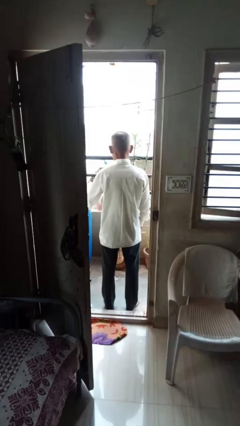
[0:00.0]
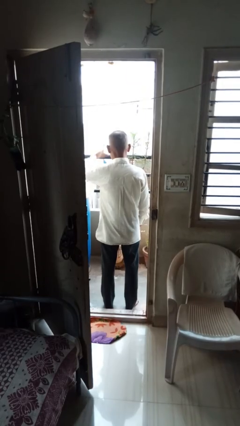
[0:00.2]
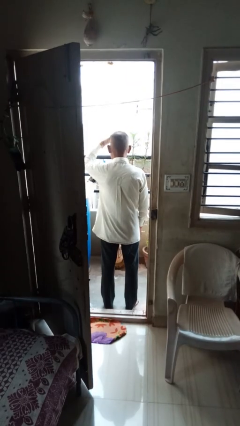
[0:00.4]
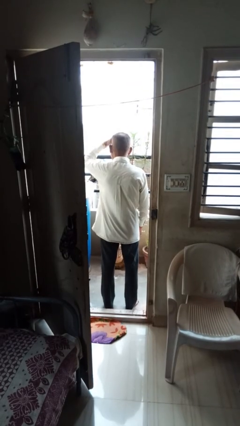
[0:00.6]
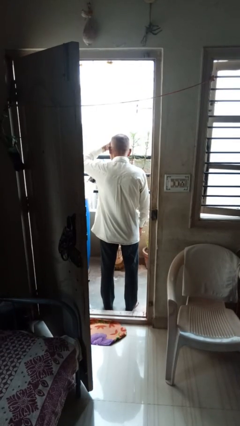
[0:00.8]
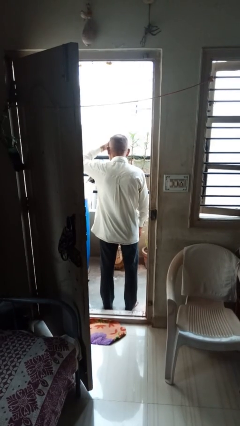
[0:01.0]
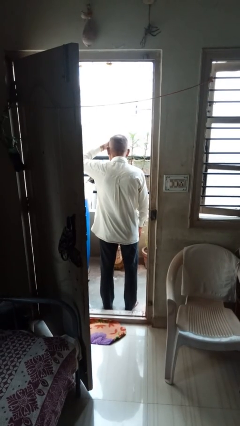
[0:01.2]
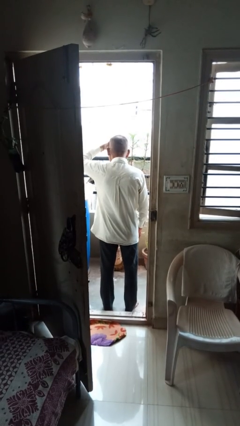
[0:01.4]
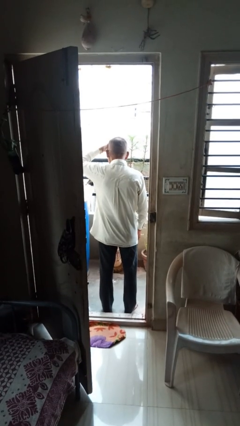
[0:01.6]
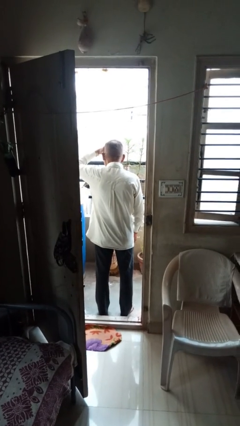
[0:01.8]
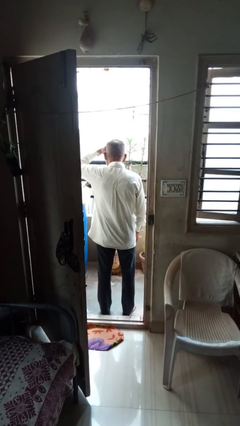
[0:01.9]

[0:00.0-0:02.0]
person shades eyes

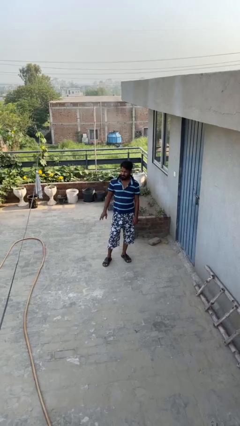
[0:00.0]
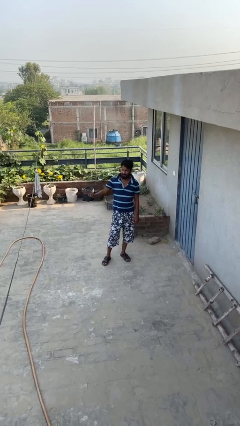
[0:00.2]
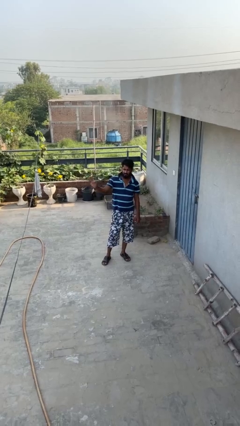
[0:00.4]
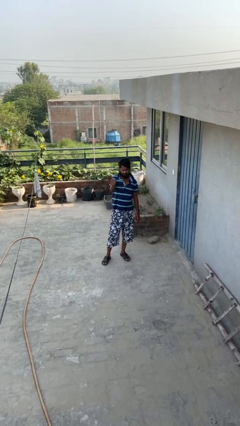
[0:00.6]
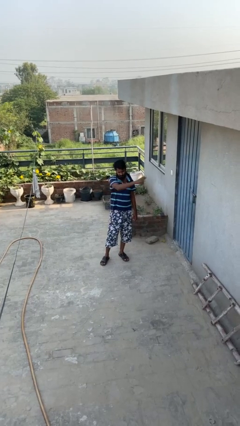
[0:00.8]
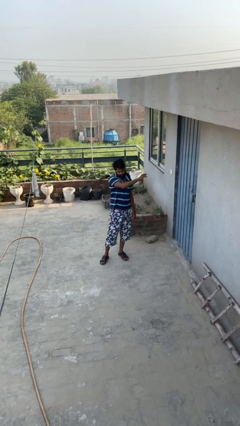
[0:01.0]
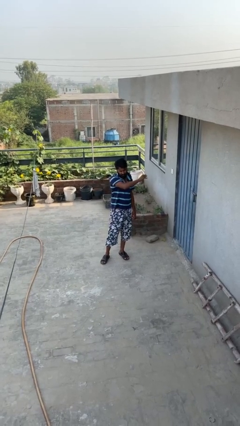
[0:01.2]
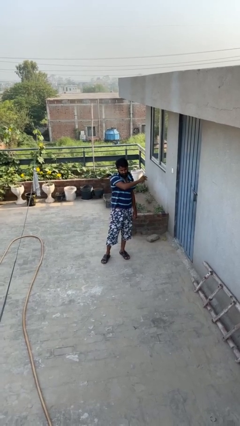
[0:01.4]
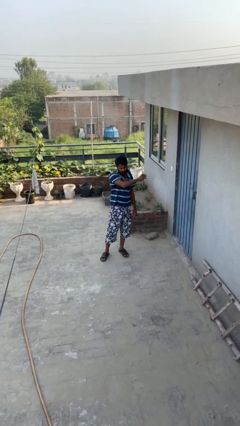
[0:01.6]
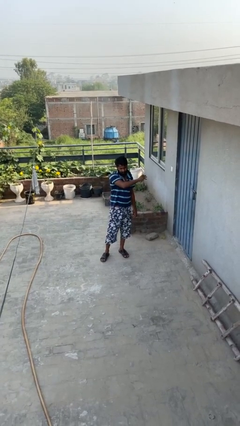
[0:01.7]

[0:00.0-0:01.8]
person gestures swipe left

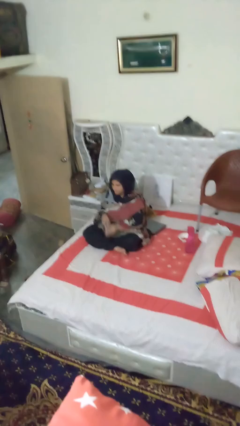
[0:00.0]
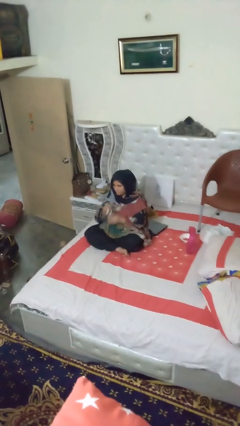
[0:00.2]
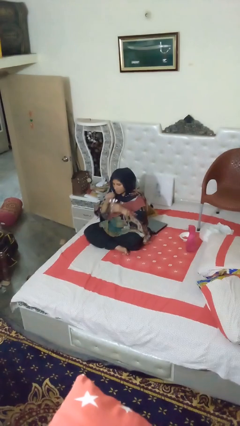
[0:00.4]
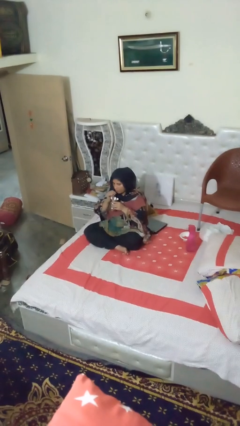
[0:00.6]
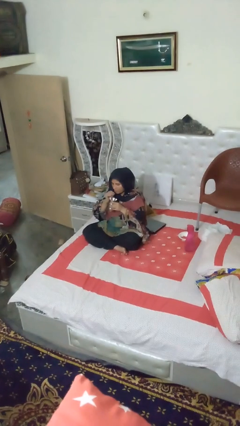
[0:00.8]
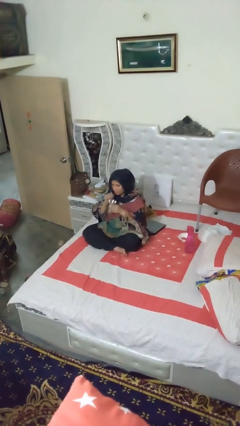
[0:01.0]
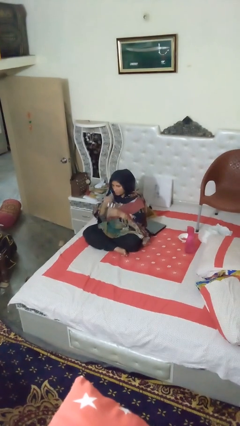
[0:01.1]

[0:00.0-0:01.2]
person drinks from straw

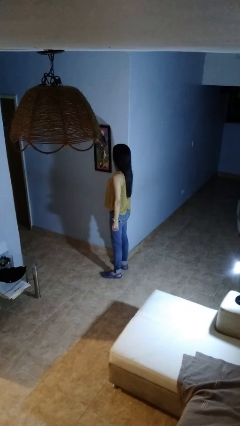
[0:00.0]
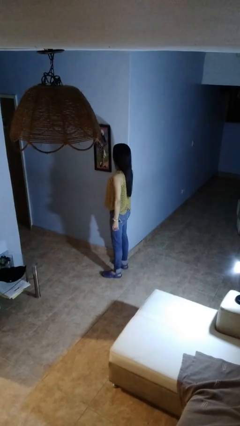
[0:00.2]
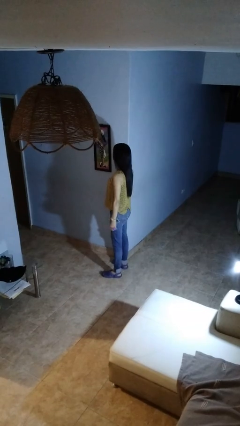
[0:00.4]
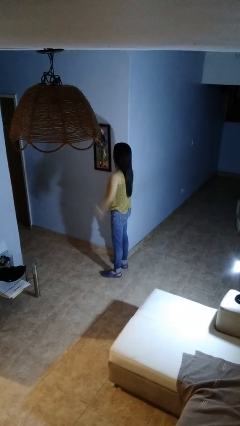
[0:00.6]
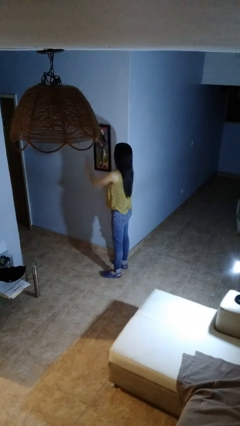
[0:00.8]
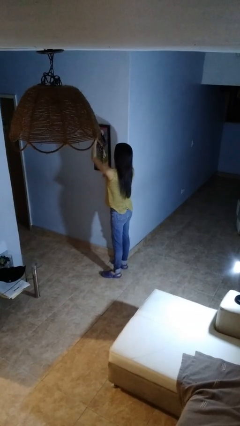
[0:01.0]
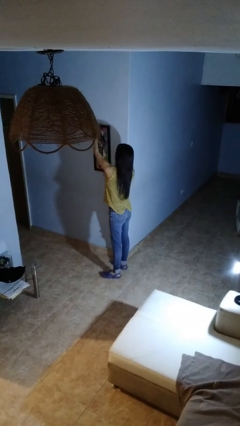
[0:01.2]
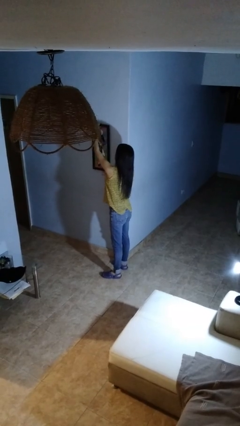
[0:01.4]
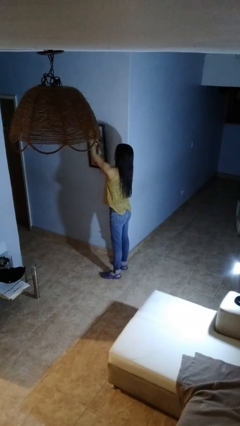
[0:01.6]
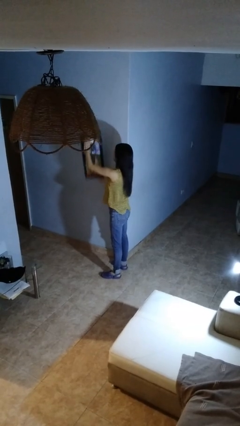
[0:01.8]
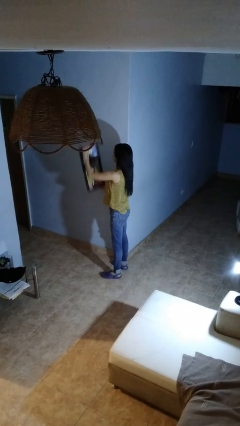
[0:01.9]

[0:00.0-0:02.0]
person takes down picture frame

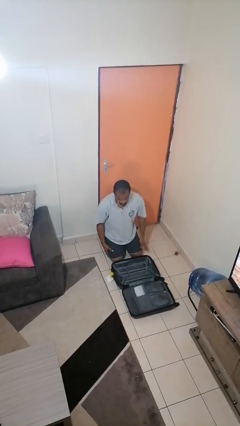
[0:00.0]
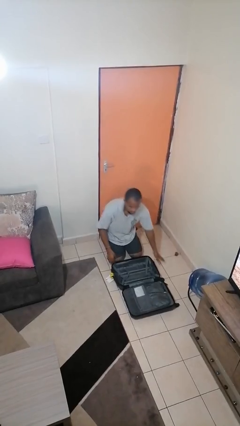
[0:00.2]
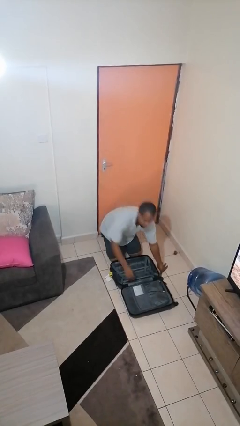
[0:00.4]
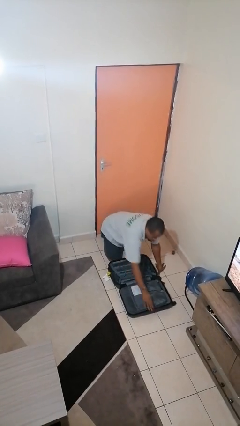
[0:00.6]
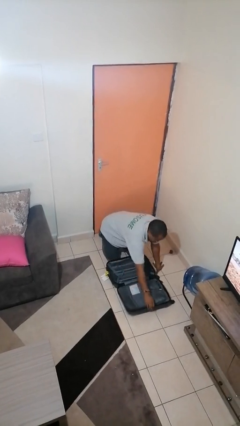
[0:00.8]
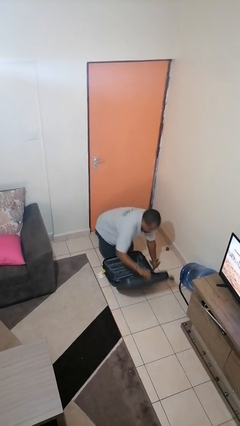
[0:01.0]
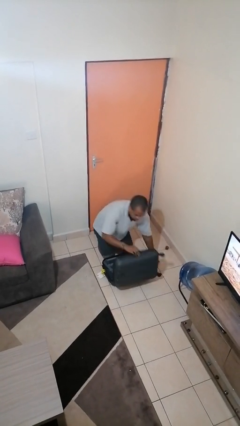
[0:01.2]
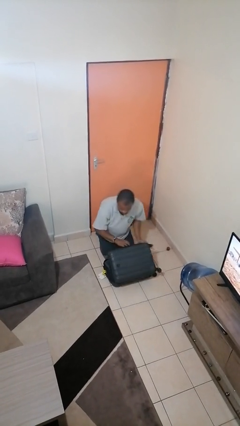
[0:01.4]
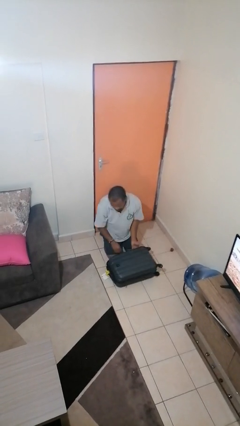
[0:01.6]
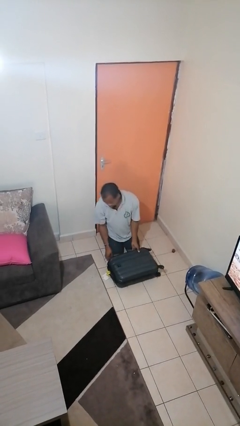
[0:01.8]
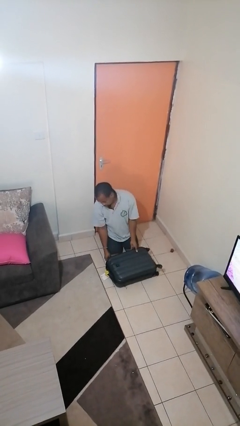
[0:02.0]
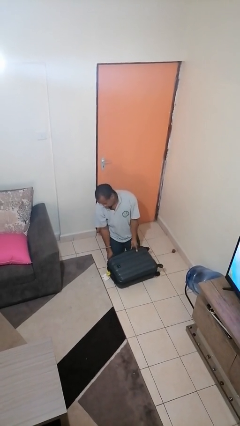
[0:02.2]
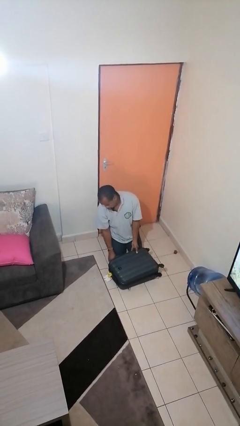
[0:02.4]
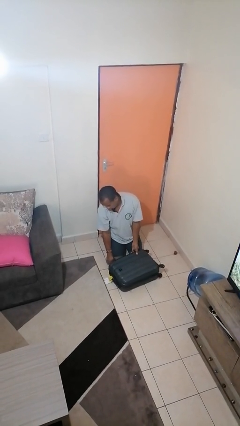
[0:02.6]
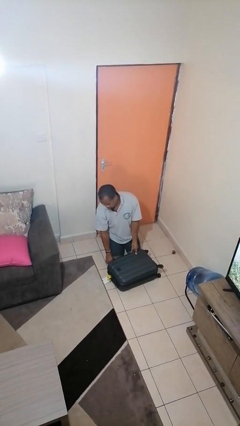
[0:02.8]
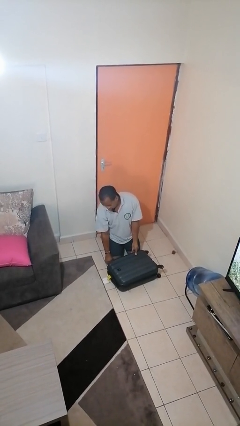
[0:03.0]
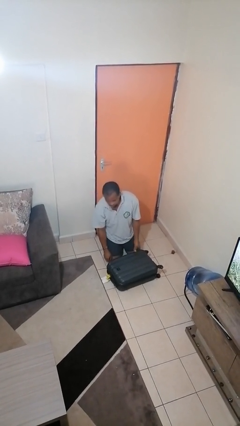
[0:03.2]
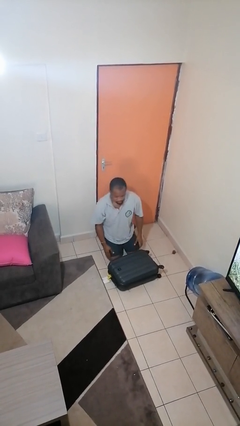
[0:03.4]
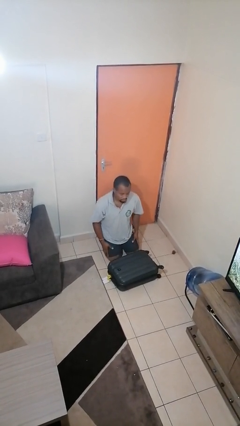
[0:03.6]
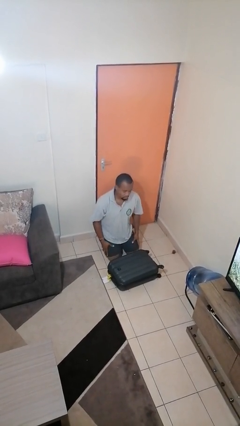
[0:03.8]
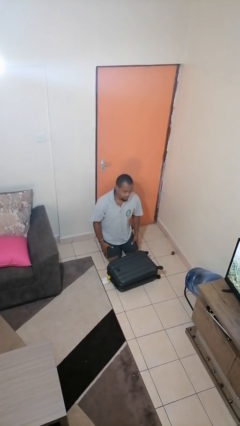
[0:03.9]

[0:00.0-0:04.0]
person closes suitcase

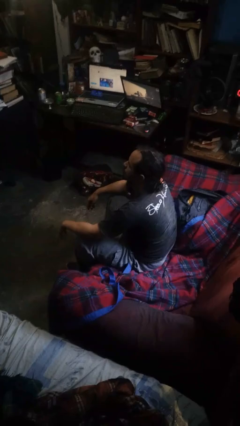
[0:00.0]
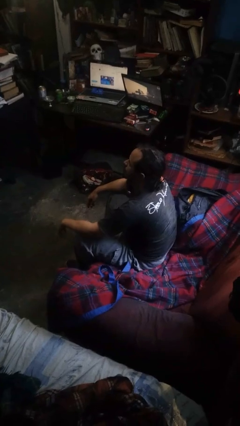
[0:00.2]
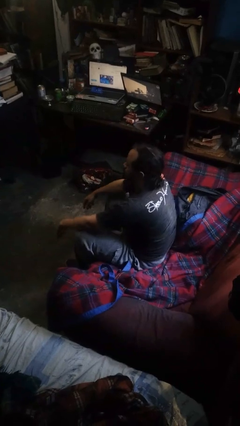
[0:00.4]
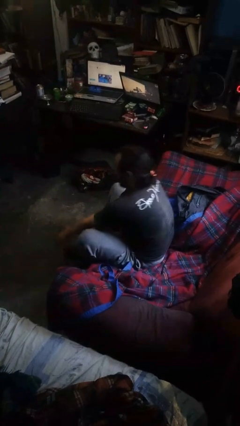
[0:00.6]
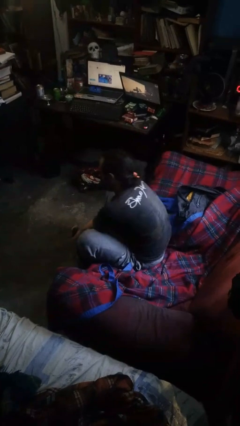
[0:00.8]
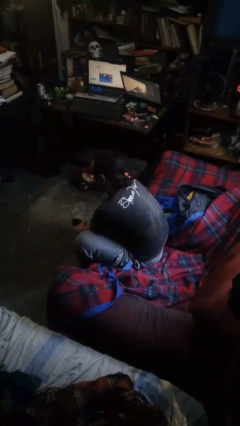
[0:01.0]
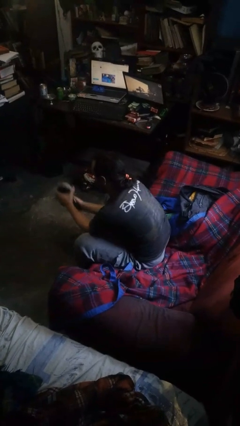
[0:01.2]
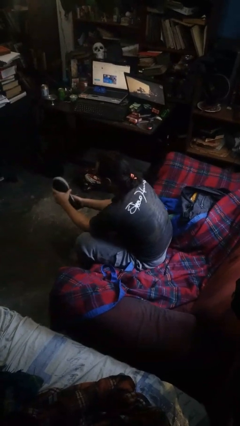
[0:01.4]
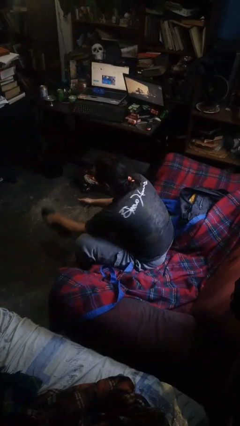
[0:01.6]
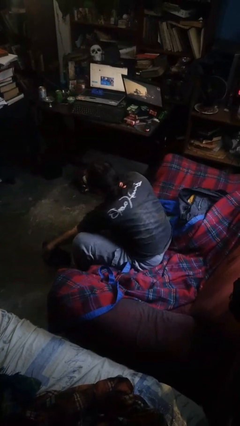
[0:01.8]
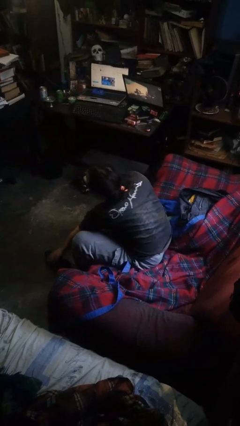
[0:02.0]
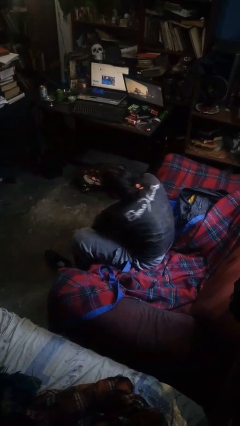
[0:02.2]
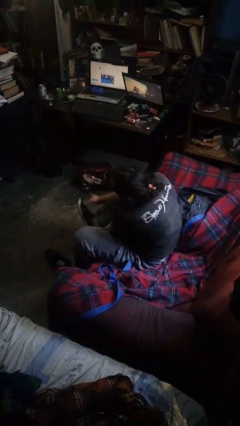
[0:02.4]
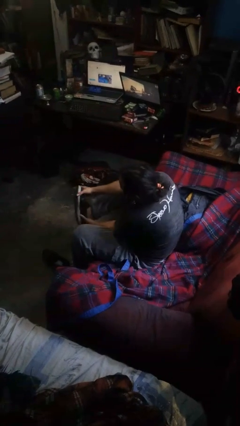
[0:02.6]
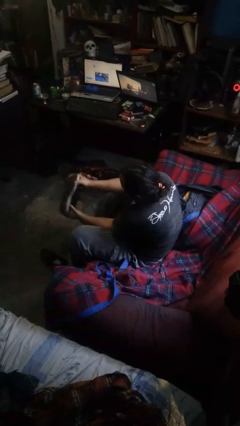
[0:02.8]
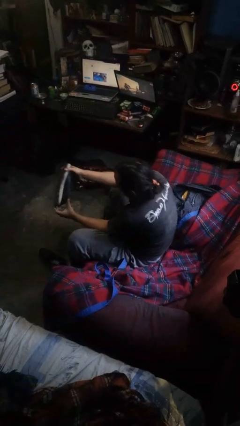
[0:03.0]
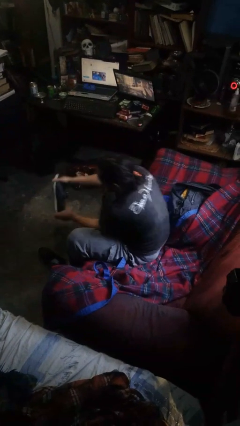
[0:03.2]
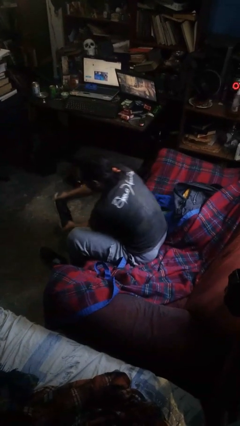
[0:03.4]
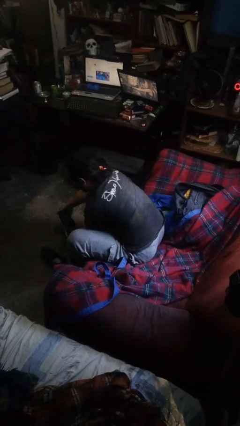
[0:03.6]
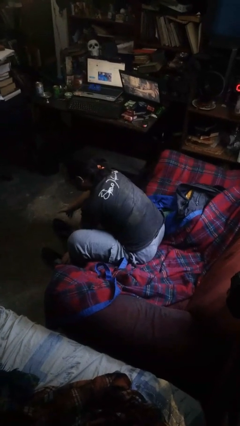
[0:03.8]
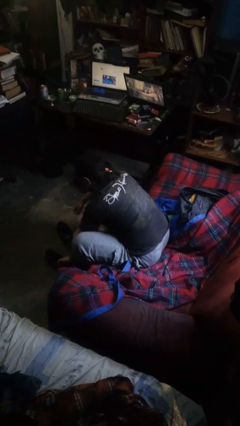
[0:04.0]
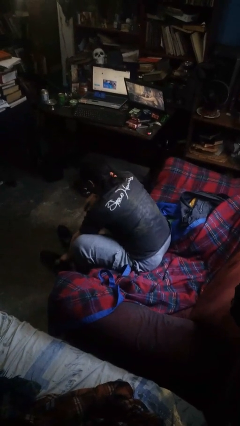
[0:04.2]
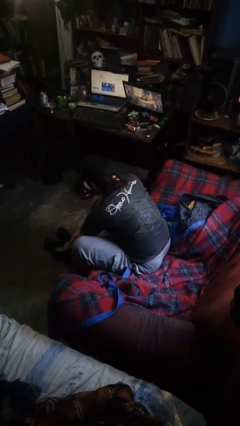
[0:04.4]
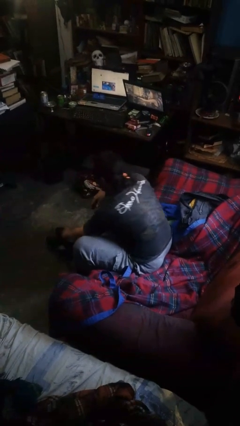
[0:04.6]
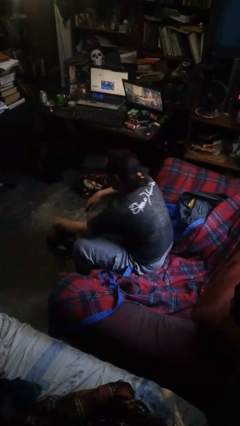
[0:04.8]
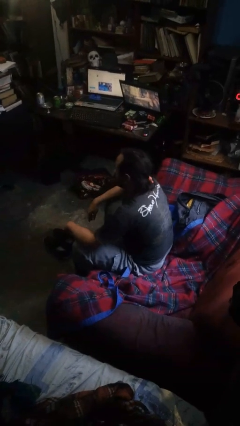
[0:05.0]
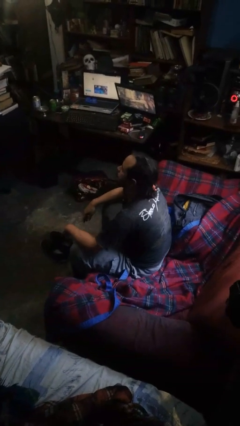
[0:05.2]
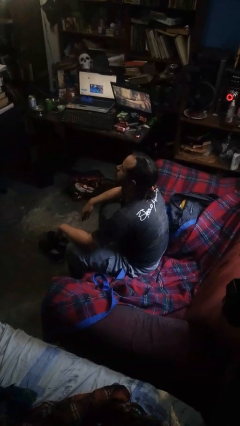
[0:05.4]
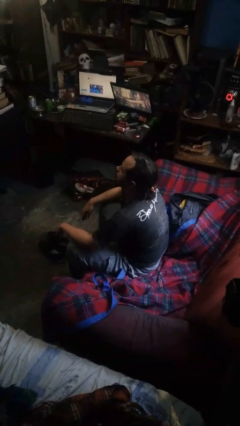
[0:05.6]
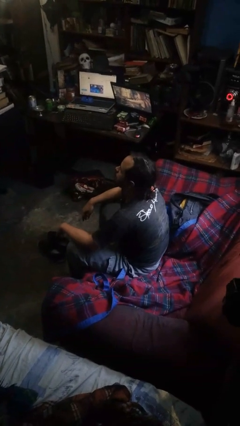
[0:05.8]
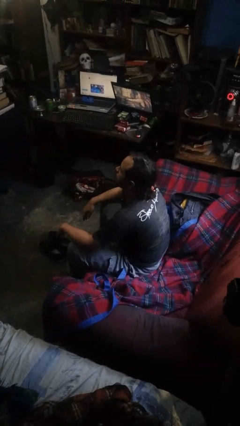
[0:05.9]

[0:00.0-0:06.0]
person takes off shoes

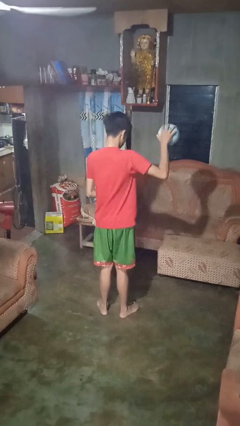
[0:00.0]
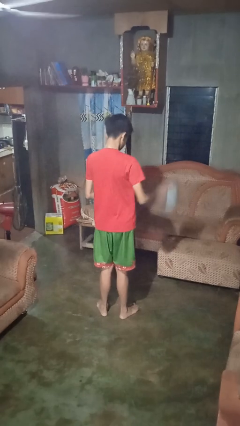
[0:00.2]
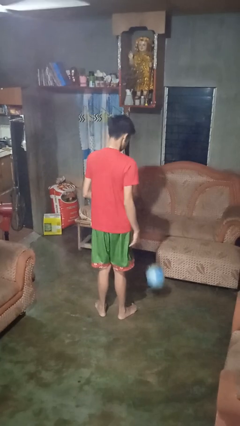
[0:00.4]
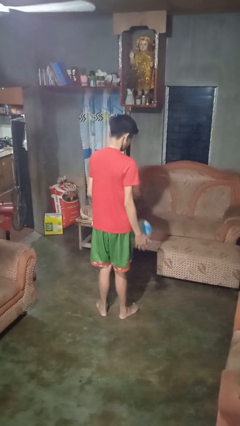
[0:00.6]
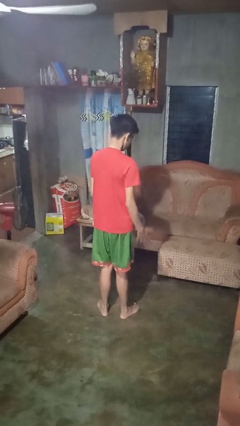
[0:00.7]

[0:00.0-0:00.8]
person bounces ball on floor
